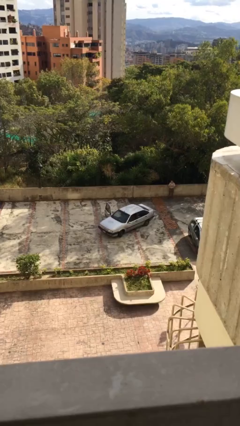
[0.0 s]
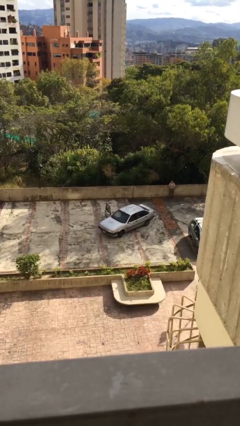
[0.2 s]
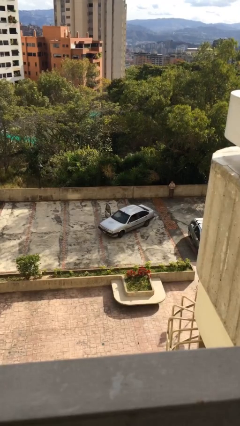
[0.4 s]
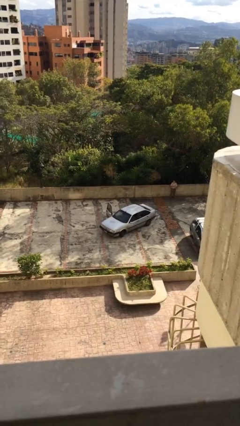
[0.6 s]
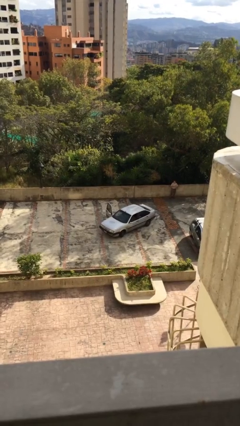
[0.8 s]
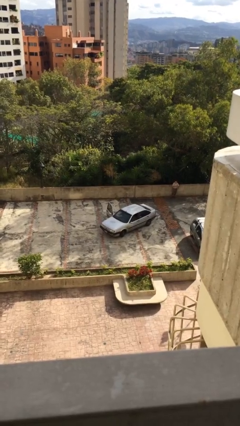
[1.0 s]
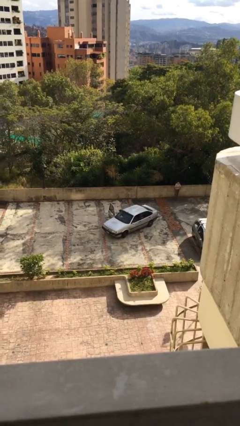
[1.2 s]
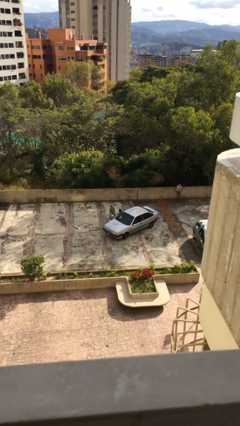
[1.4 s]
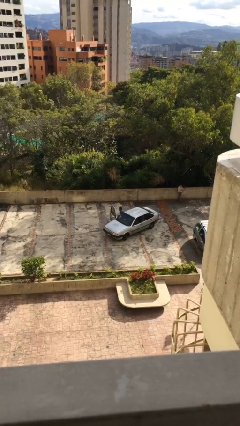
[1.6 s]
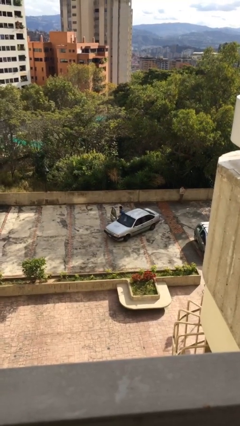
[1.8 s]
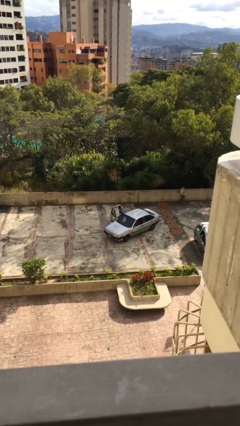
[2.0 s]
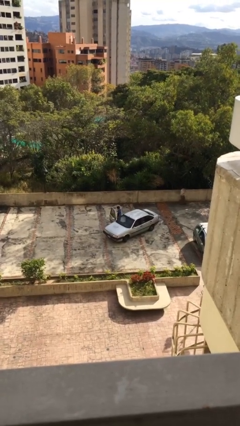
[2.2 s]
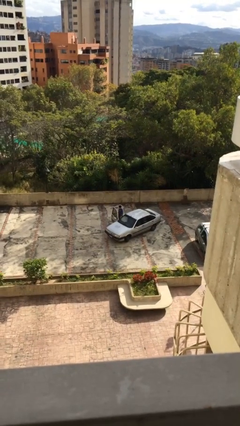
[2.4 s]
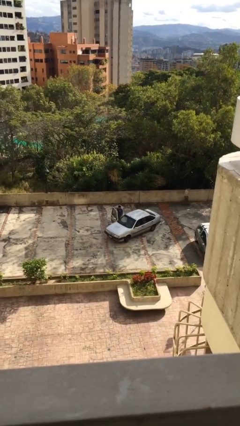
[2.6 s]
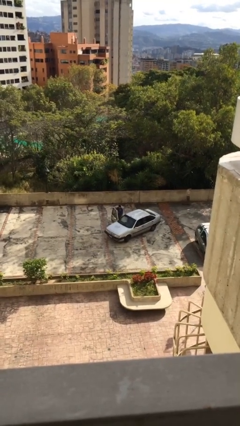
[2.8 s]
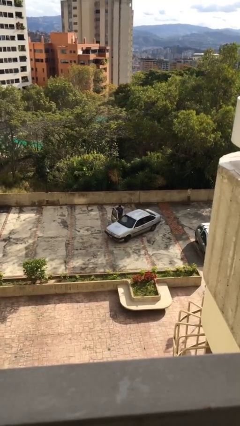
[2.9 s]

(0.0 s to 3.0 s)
person exits car

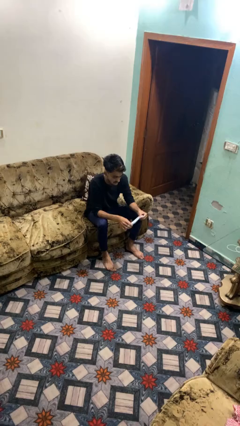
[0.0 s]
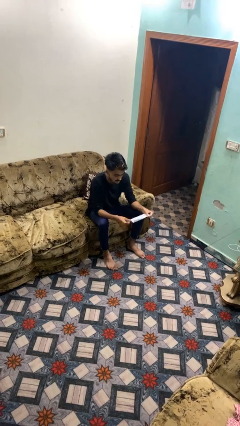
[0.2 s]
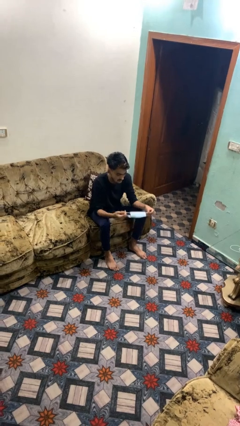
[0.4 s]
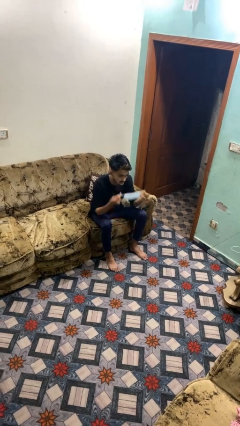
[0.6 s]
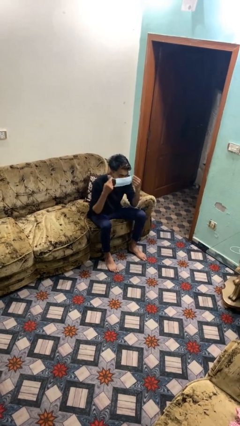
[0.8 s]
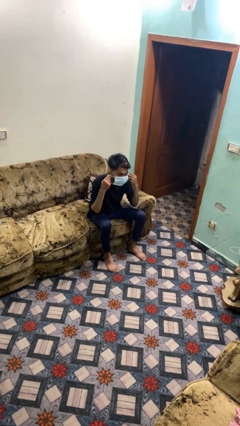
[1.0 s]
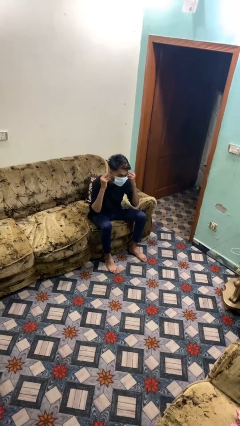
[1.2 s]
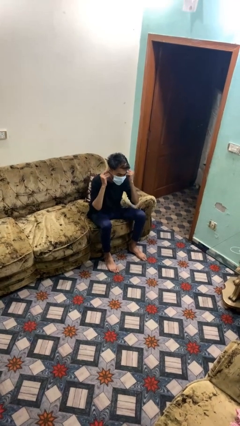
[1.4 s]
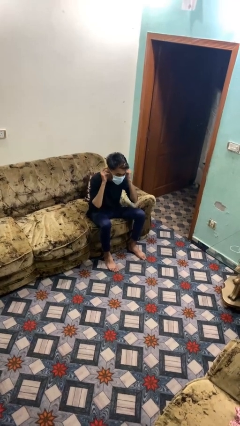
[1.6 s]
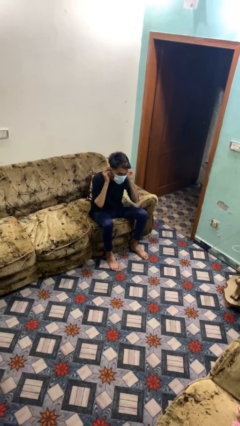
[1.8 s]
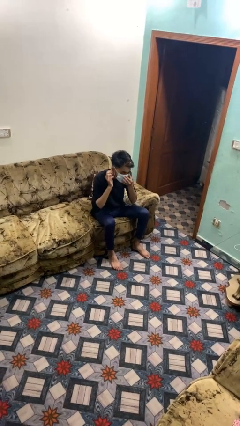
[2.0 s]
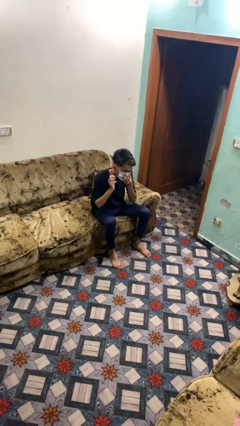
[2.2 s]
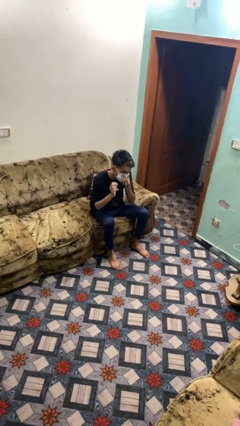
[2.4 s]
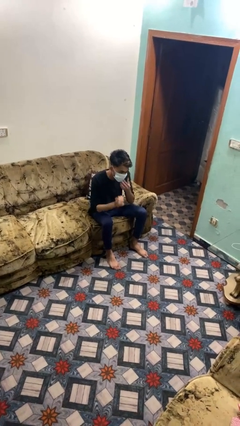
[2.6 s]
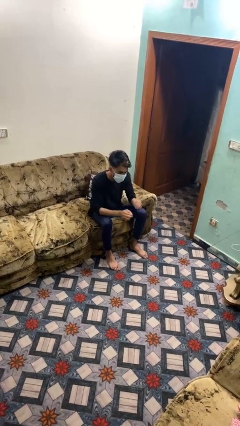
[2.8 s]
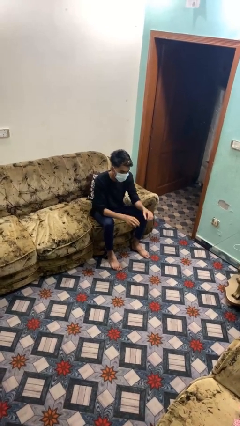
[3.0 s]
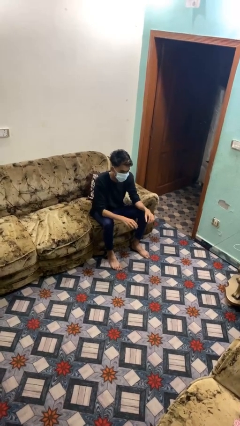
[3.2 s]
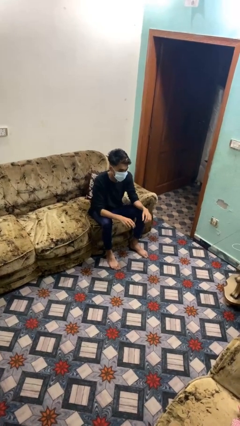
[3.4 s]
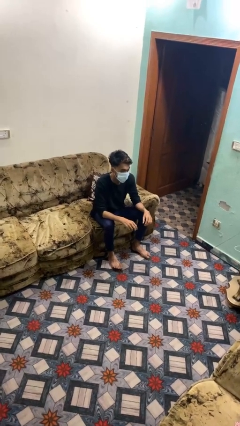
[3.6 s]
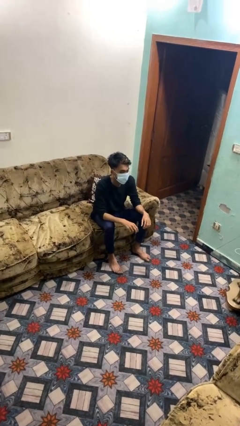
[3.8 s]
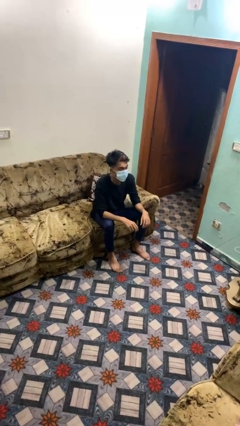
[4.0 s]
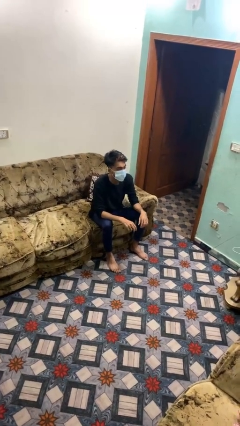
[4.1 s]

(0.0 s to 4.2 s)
person puts on facemask

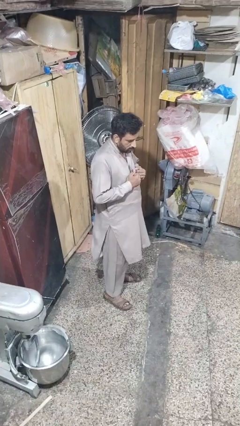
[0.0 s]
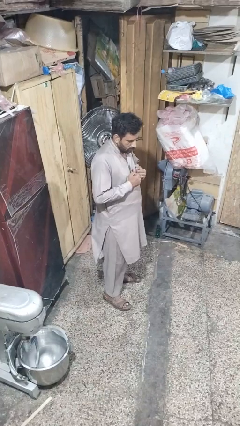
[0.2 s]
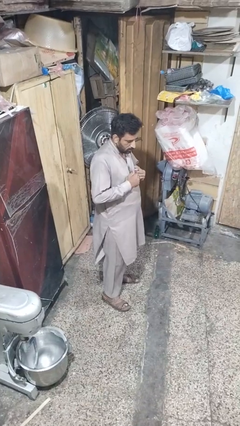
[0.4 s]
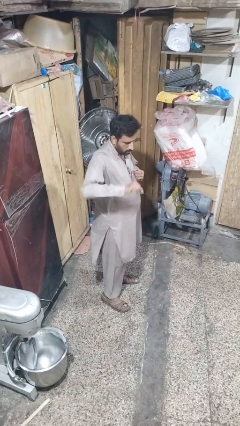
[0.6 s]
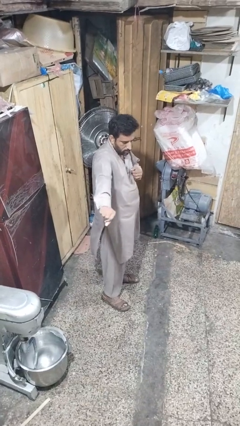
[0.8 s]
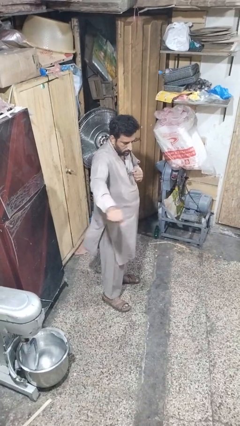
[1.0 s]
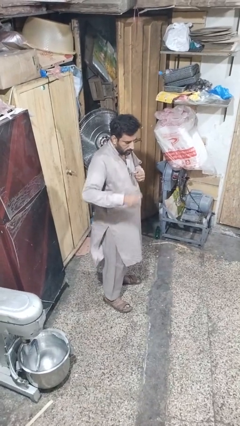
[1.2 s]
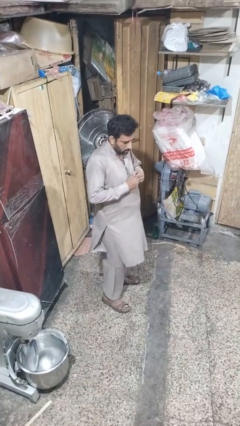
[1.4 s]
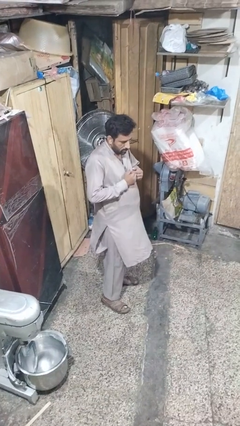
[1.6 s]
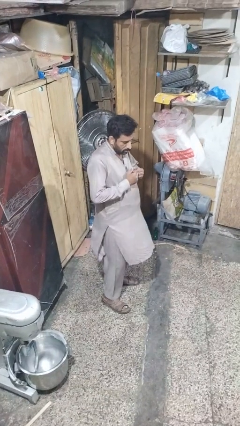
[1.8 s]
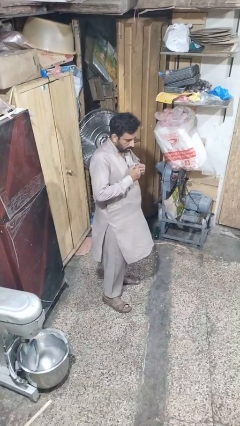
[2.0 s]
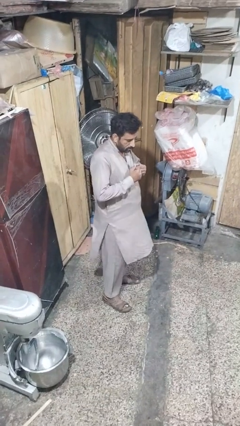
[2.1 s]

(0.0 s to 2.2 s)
person karate chop

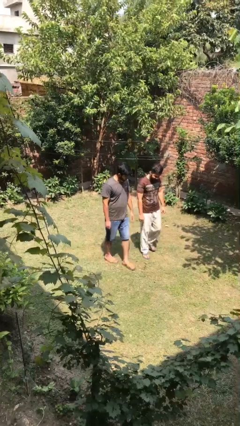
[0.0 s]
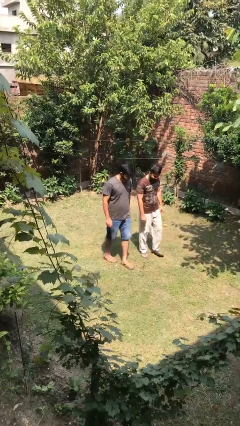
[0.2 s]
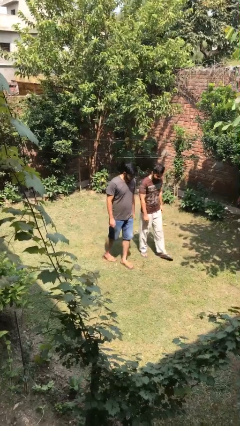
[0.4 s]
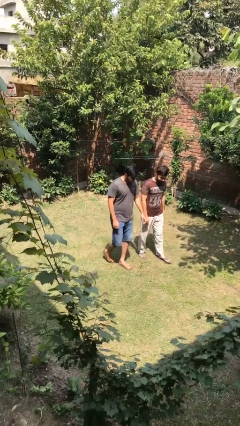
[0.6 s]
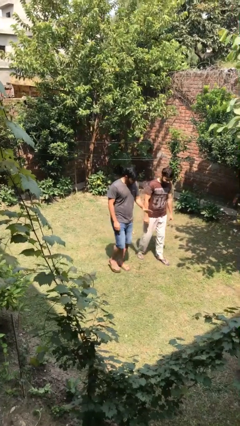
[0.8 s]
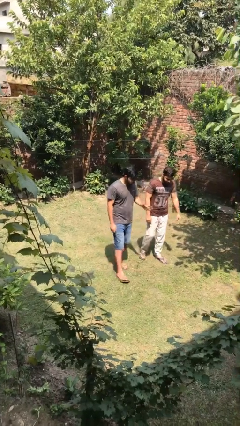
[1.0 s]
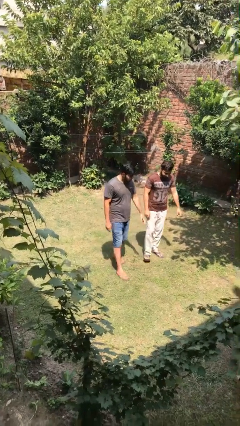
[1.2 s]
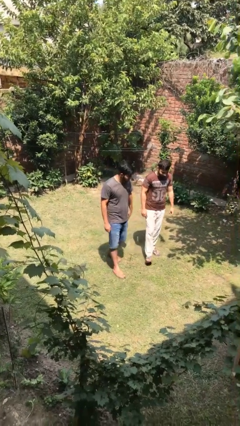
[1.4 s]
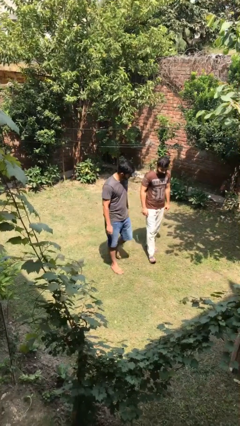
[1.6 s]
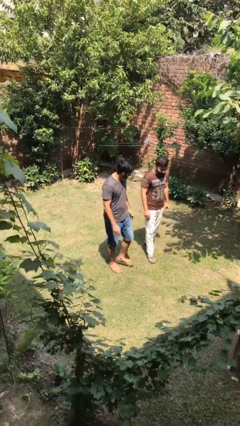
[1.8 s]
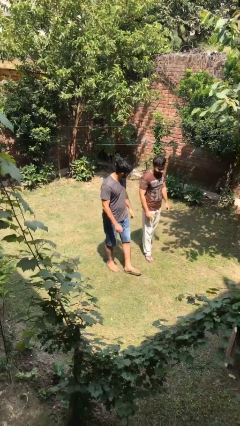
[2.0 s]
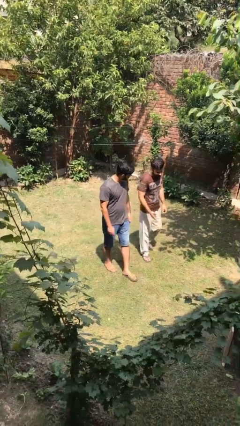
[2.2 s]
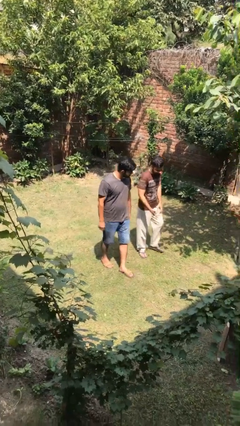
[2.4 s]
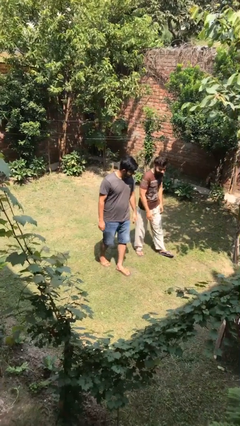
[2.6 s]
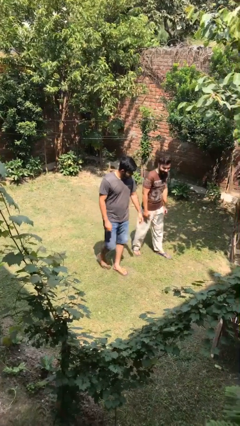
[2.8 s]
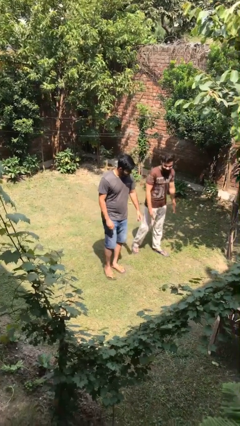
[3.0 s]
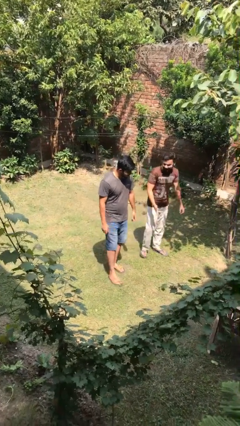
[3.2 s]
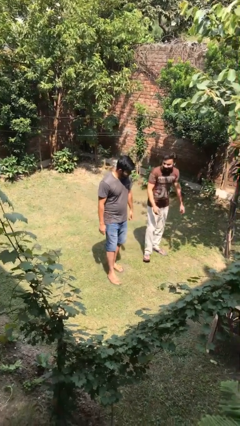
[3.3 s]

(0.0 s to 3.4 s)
person talks to person

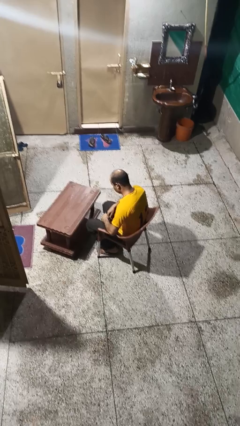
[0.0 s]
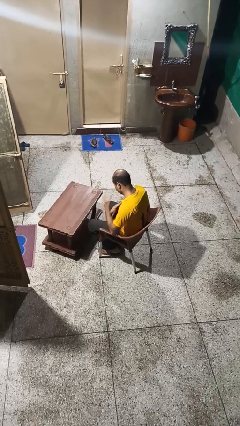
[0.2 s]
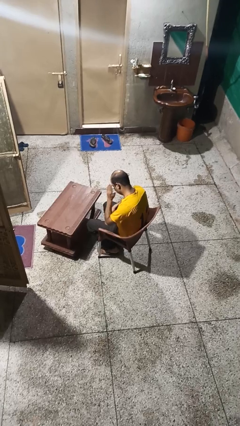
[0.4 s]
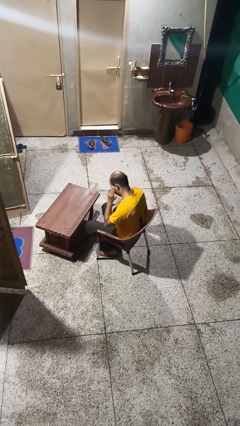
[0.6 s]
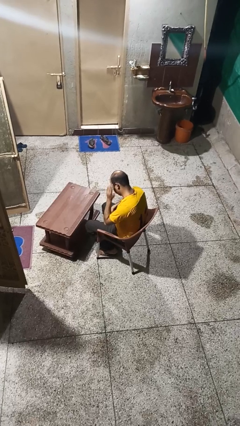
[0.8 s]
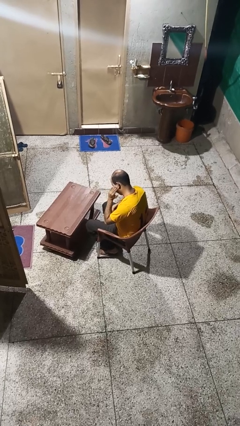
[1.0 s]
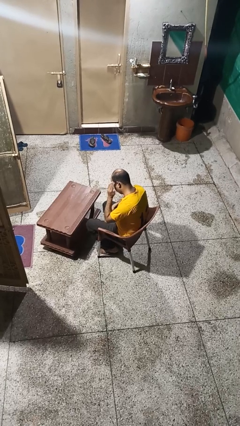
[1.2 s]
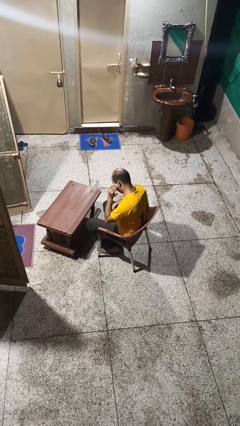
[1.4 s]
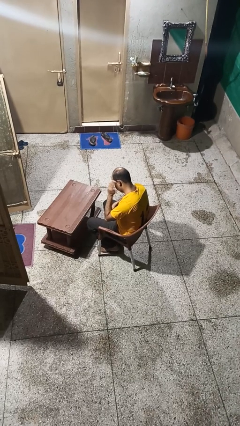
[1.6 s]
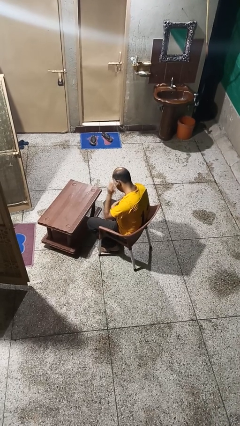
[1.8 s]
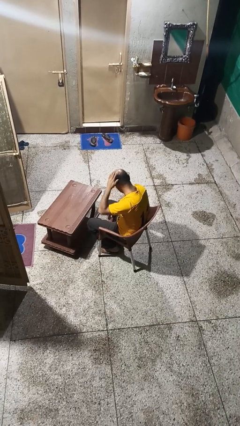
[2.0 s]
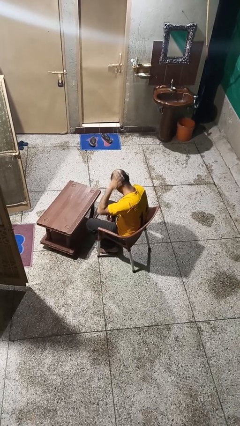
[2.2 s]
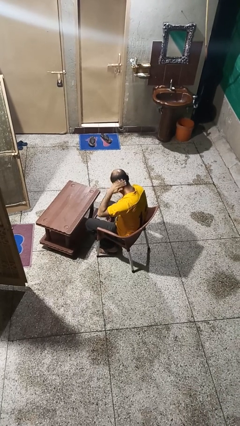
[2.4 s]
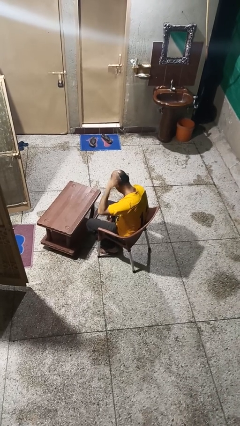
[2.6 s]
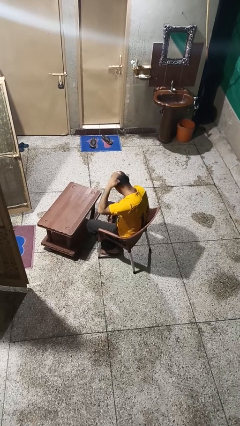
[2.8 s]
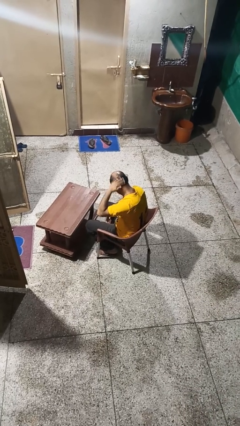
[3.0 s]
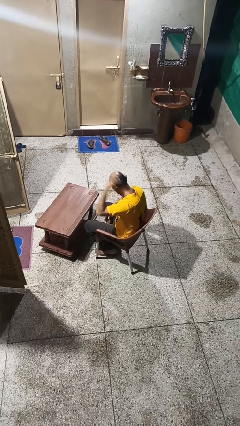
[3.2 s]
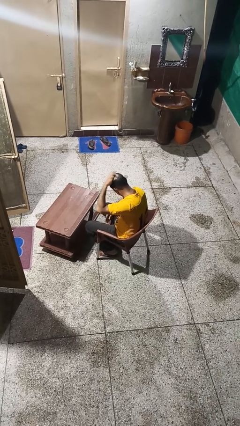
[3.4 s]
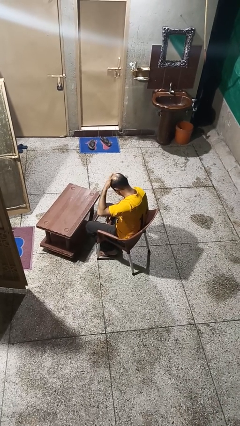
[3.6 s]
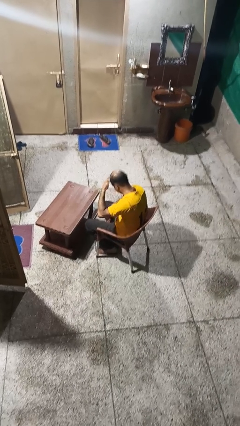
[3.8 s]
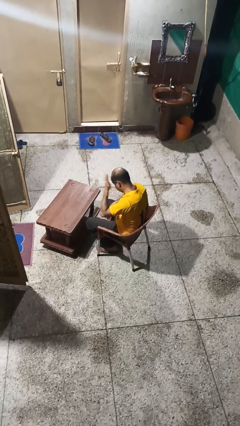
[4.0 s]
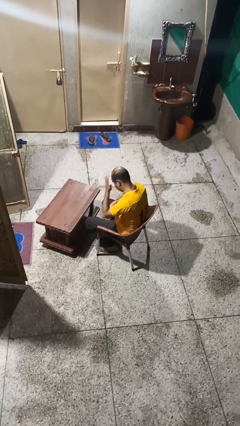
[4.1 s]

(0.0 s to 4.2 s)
person strokes hair
